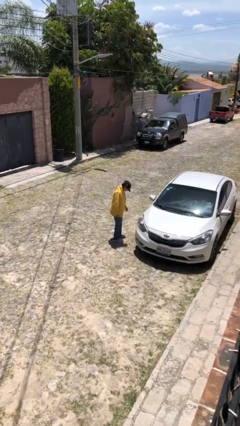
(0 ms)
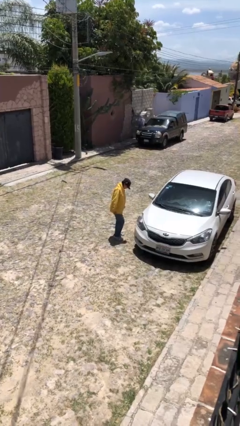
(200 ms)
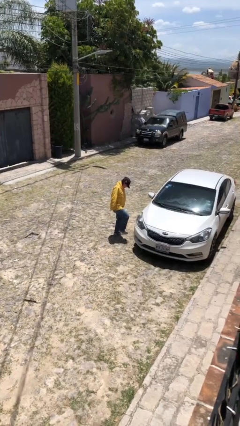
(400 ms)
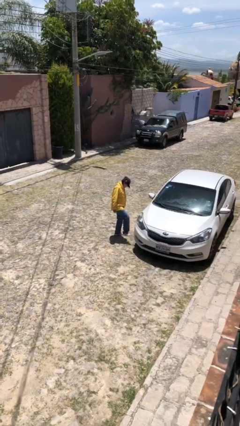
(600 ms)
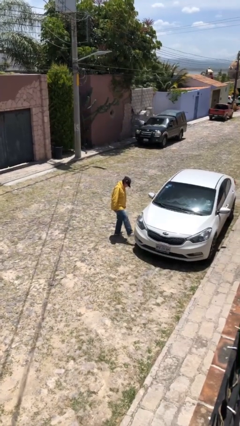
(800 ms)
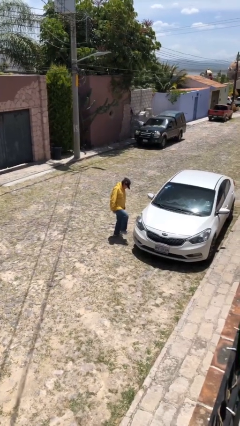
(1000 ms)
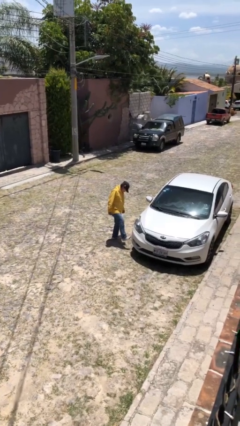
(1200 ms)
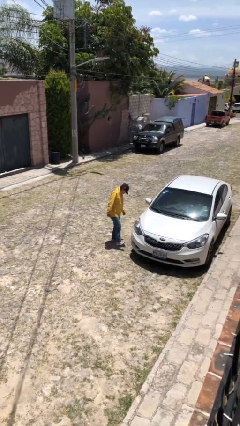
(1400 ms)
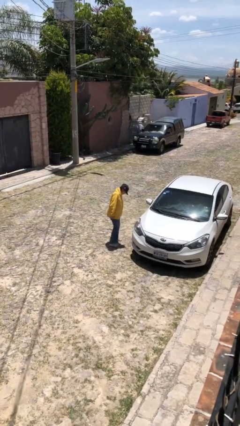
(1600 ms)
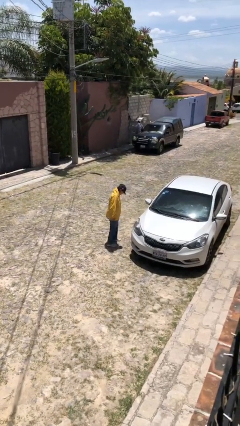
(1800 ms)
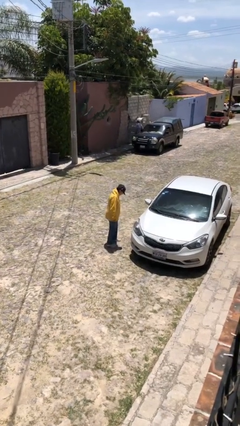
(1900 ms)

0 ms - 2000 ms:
person kicks car tires

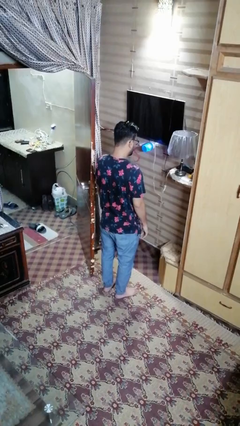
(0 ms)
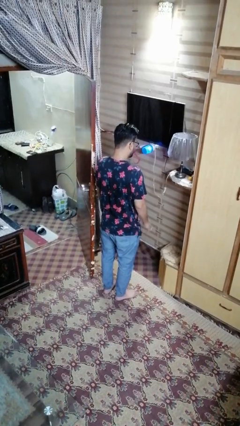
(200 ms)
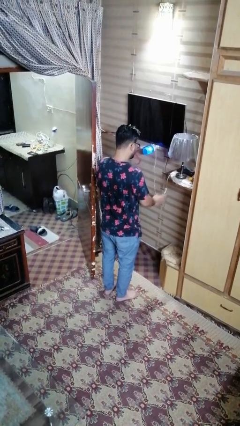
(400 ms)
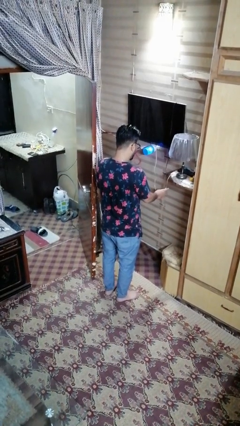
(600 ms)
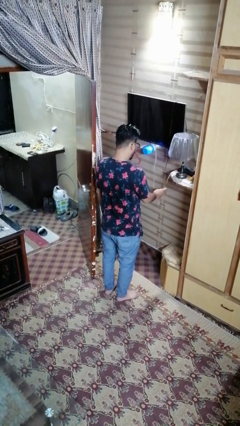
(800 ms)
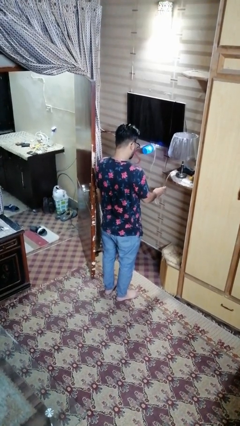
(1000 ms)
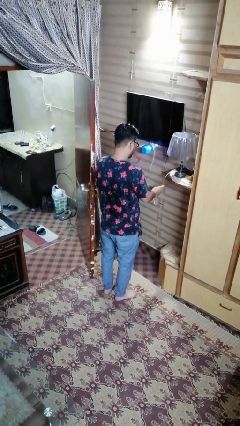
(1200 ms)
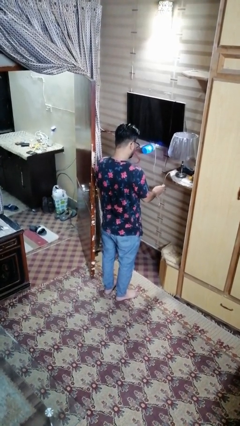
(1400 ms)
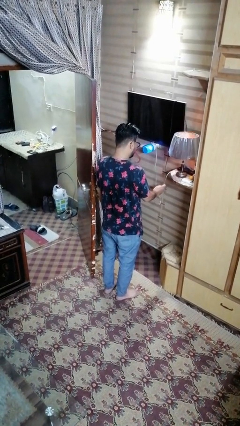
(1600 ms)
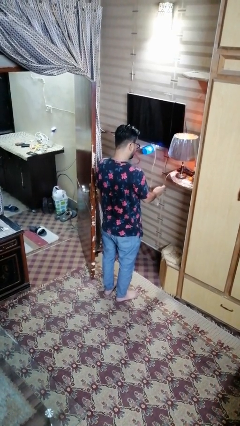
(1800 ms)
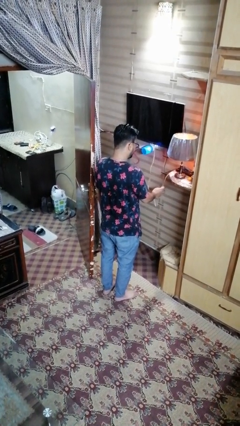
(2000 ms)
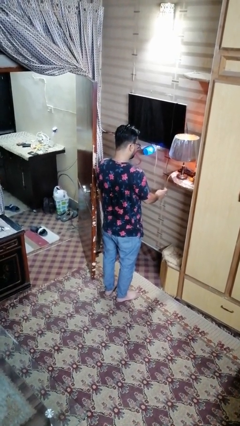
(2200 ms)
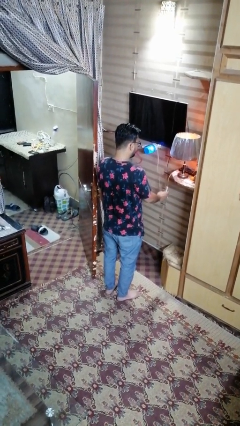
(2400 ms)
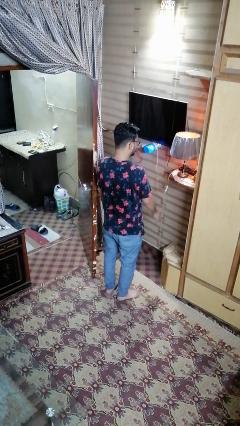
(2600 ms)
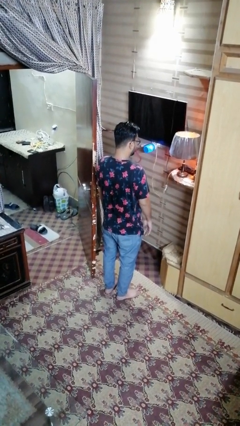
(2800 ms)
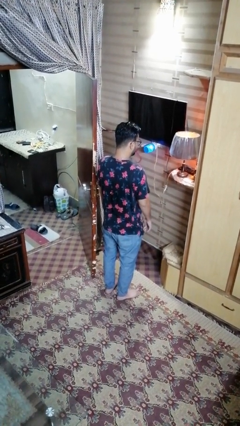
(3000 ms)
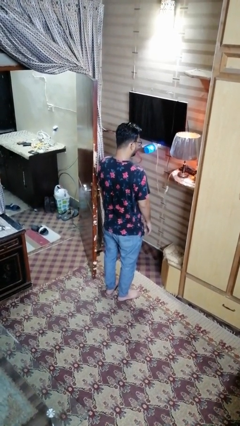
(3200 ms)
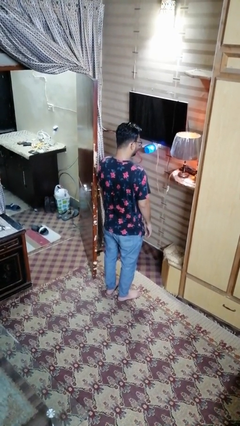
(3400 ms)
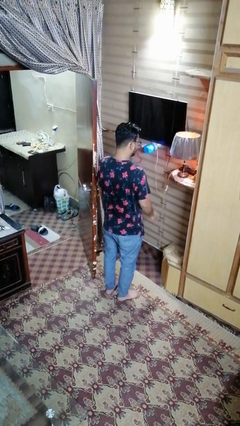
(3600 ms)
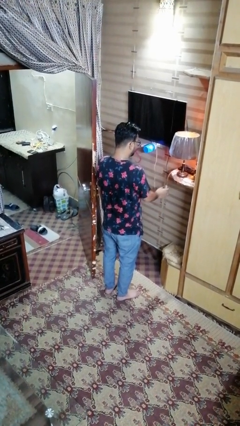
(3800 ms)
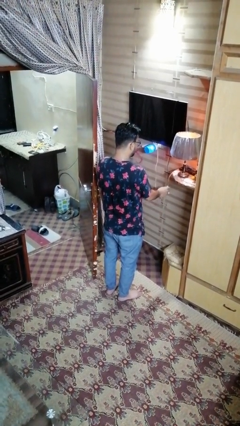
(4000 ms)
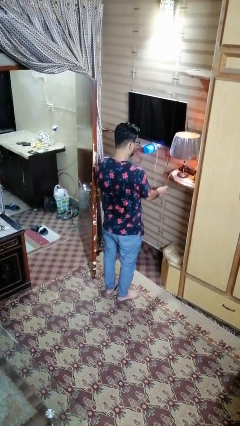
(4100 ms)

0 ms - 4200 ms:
person turns on lamp

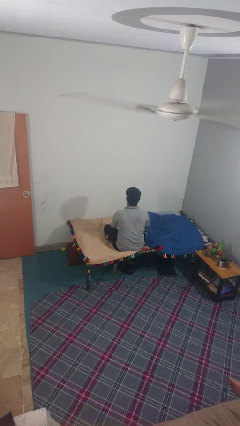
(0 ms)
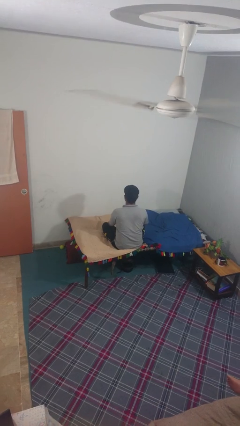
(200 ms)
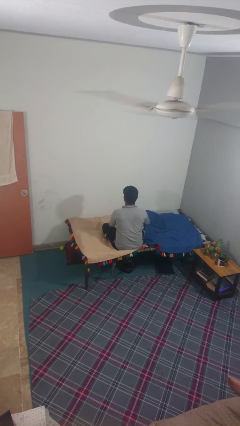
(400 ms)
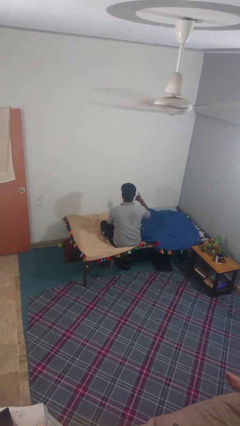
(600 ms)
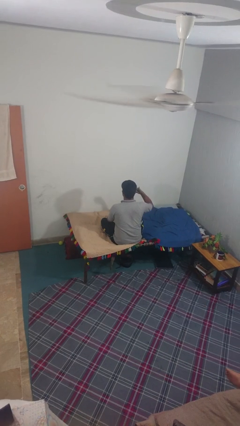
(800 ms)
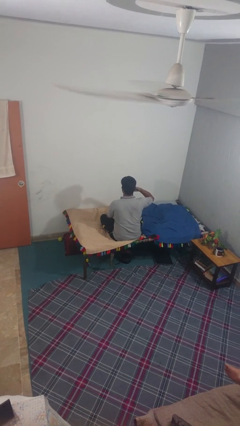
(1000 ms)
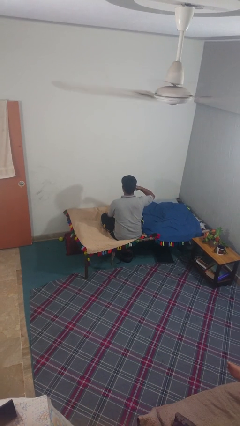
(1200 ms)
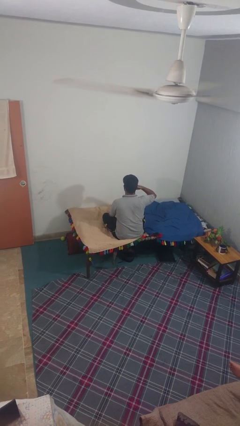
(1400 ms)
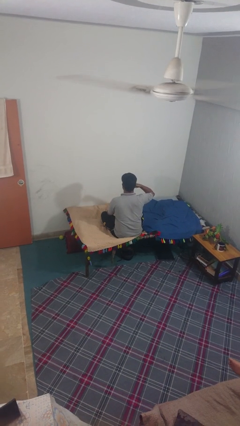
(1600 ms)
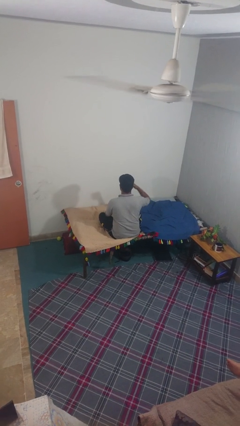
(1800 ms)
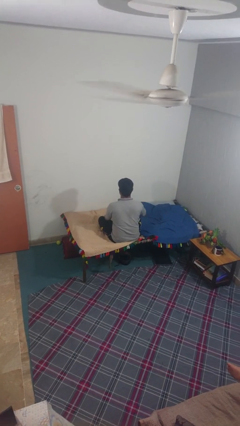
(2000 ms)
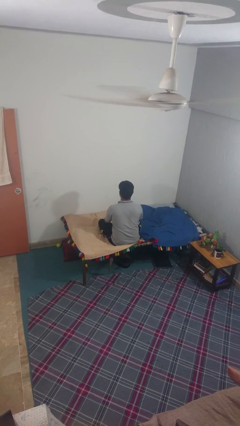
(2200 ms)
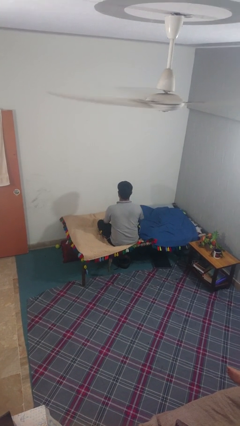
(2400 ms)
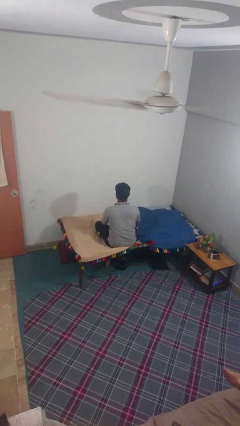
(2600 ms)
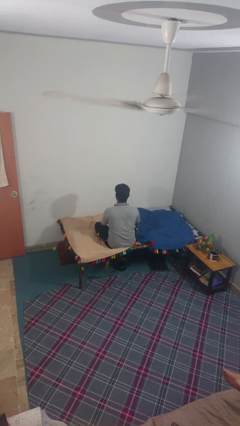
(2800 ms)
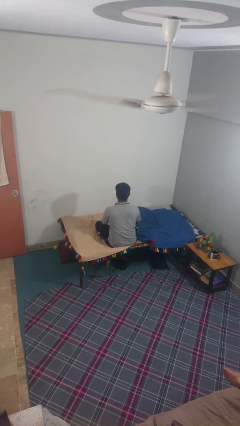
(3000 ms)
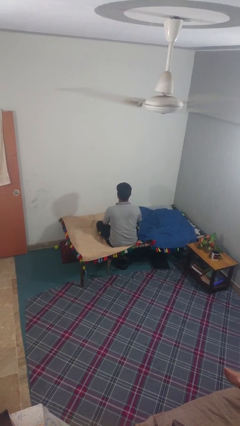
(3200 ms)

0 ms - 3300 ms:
person gestures call me

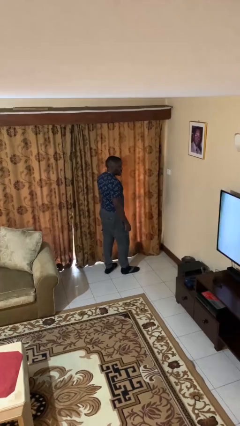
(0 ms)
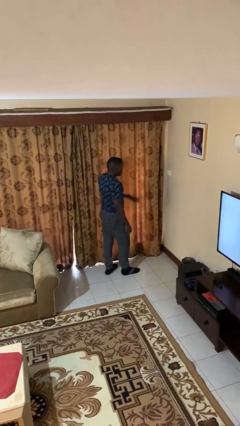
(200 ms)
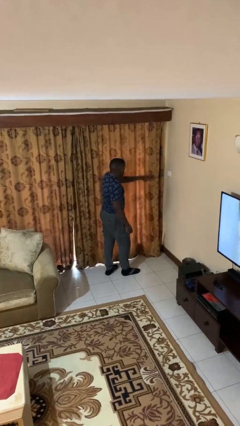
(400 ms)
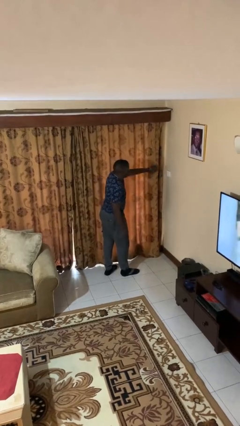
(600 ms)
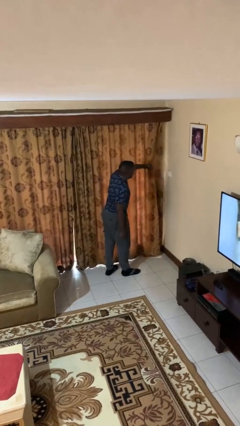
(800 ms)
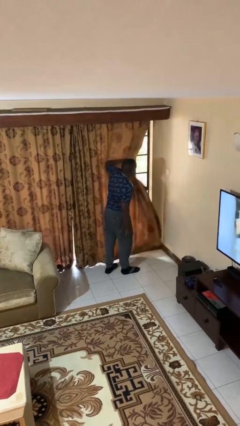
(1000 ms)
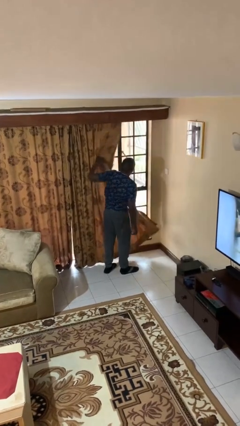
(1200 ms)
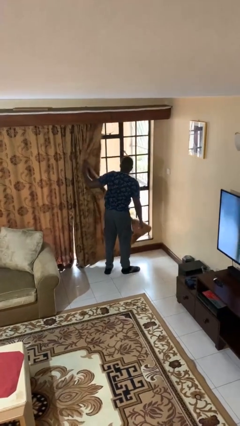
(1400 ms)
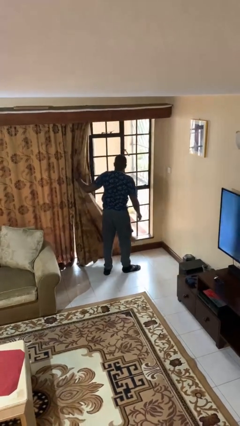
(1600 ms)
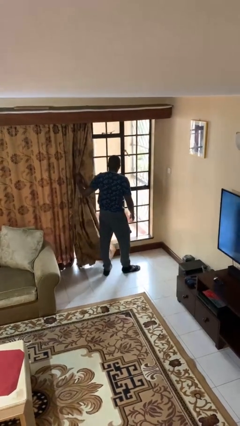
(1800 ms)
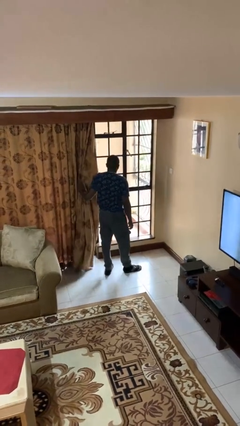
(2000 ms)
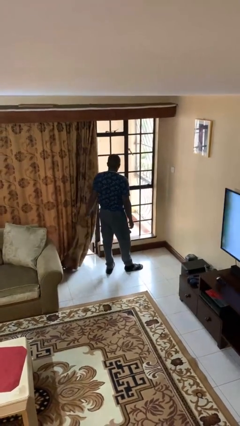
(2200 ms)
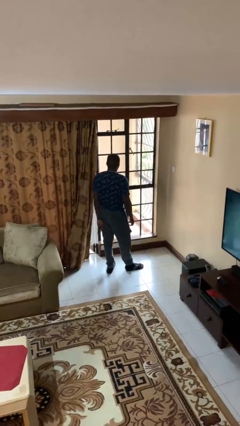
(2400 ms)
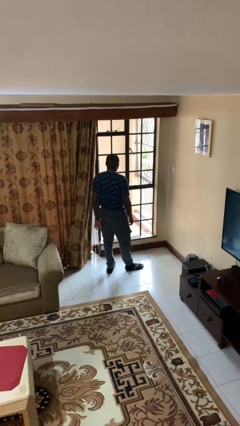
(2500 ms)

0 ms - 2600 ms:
person opens curtains

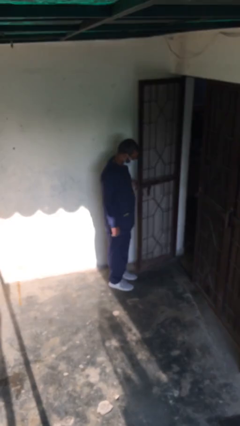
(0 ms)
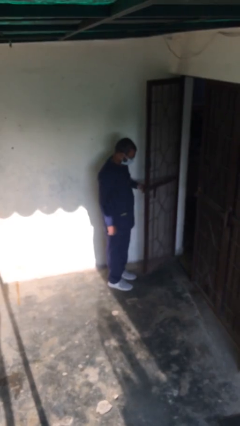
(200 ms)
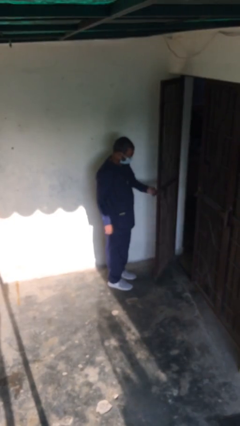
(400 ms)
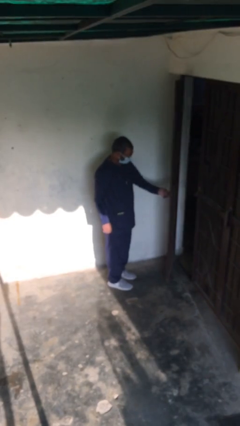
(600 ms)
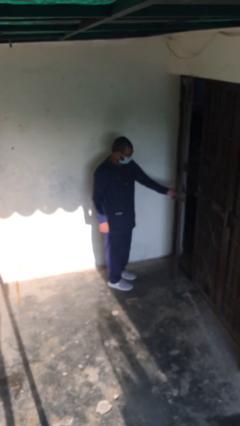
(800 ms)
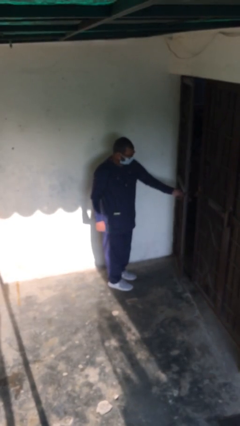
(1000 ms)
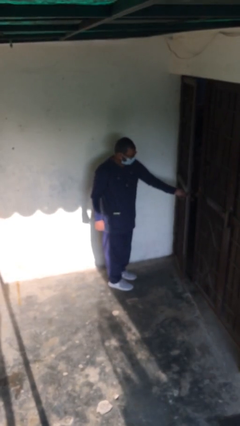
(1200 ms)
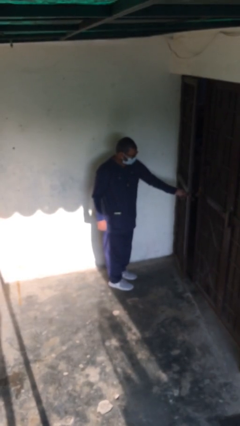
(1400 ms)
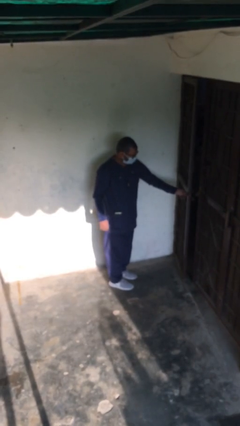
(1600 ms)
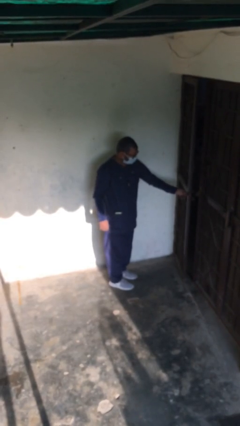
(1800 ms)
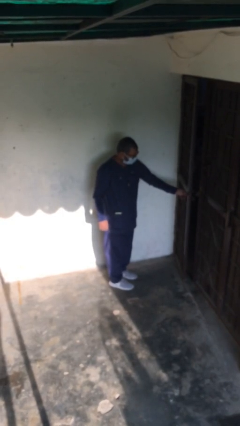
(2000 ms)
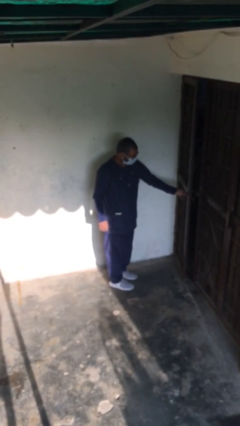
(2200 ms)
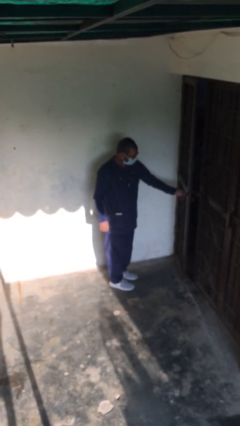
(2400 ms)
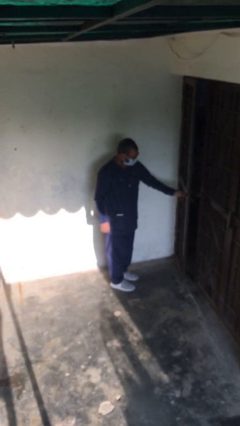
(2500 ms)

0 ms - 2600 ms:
person closes facility door

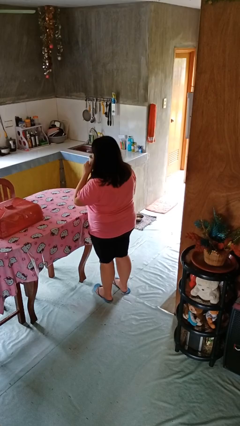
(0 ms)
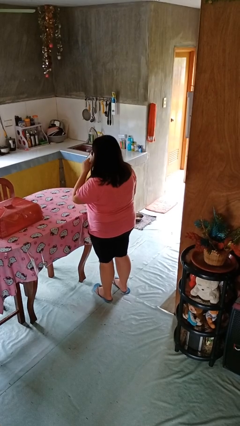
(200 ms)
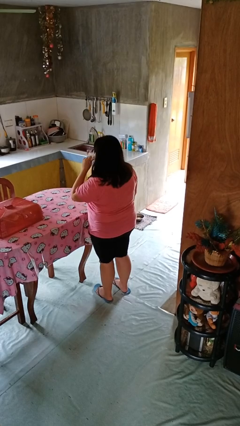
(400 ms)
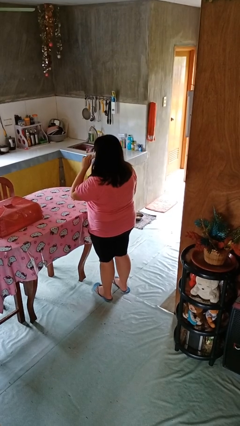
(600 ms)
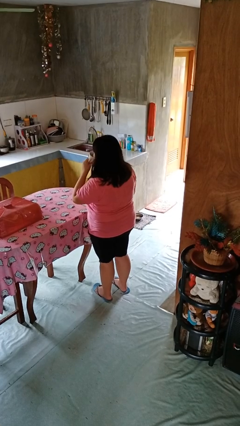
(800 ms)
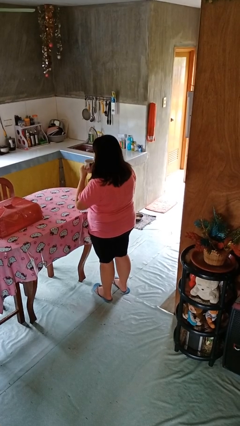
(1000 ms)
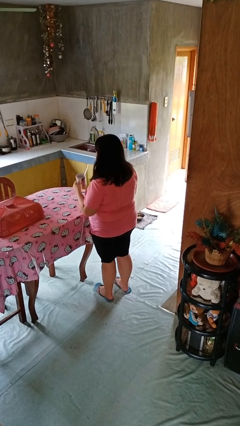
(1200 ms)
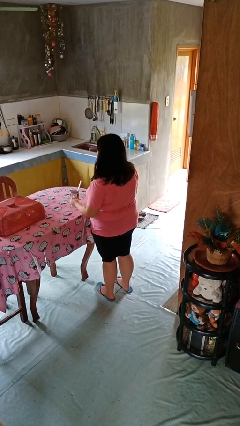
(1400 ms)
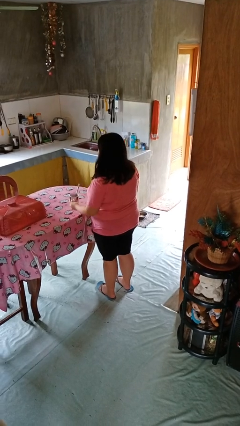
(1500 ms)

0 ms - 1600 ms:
person drinks from mug

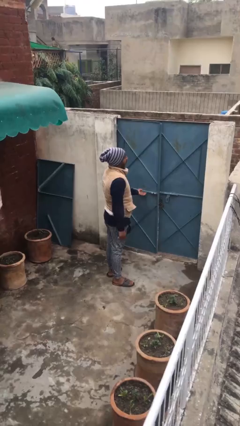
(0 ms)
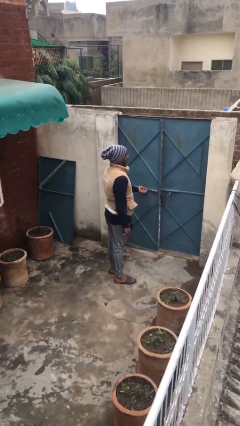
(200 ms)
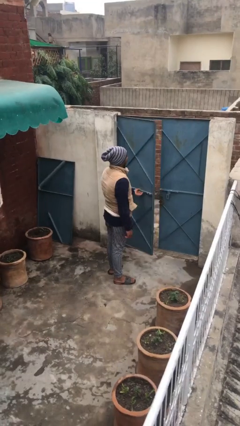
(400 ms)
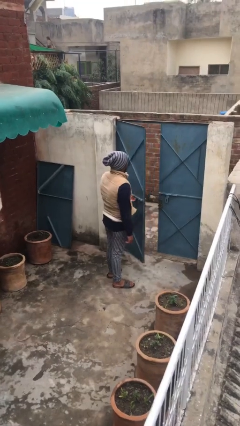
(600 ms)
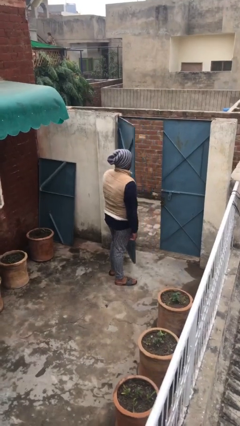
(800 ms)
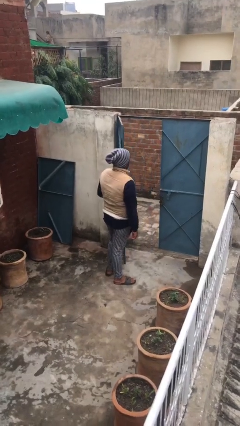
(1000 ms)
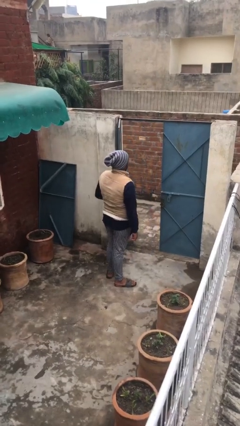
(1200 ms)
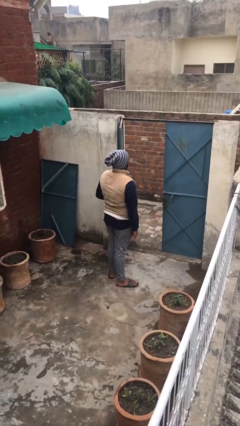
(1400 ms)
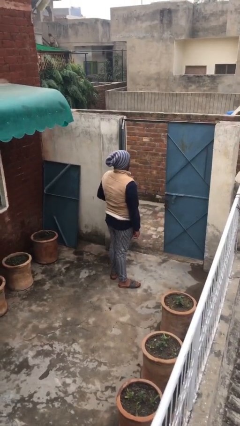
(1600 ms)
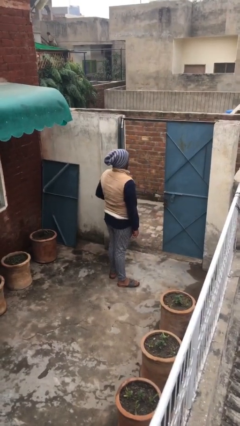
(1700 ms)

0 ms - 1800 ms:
person opens facility door
